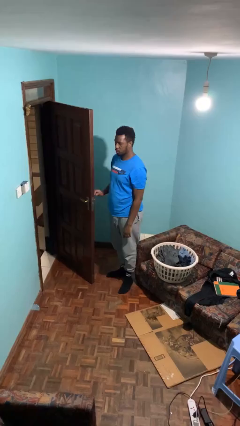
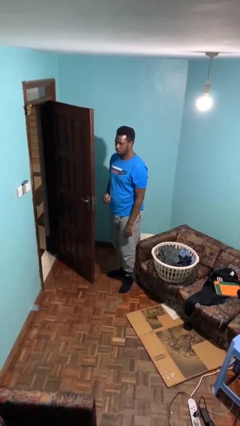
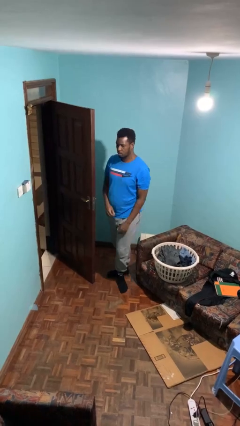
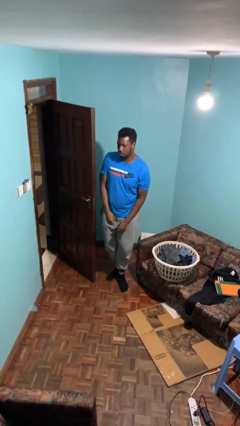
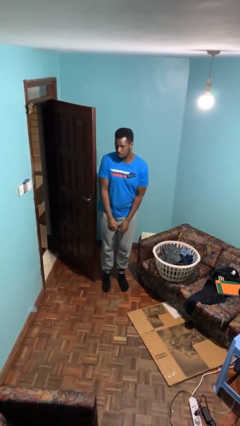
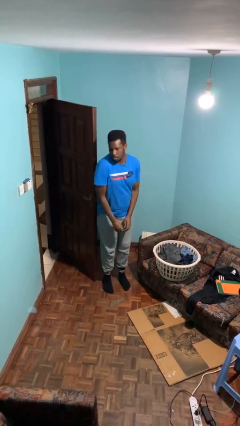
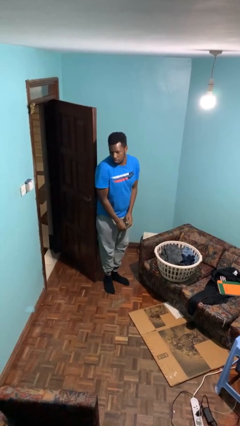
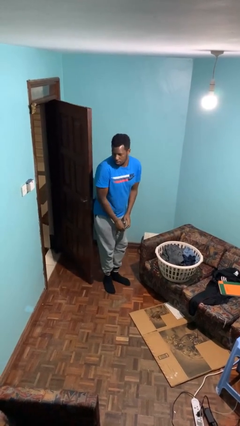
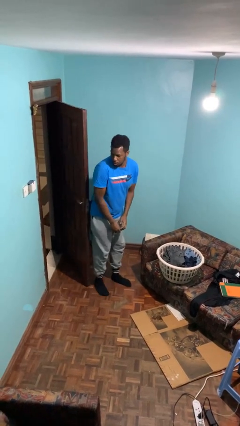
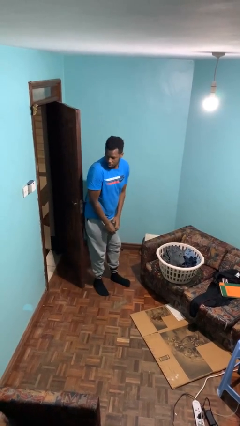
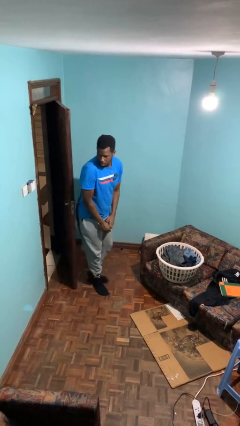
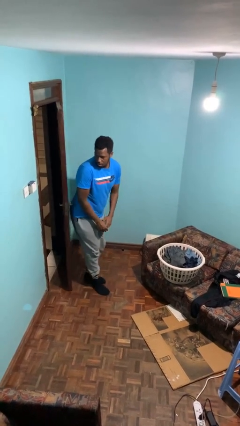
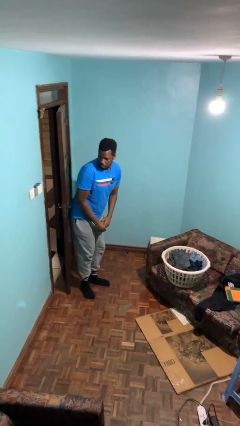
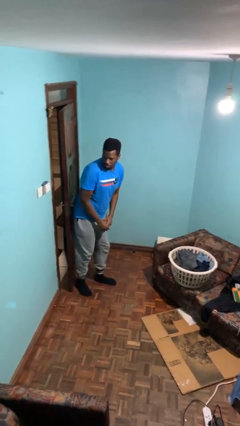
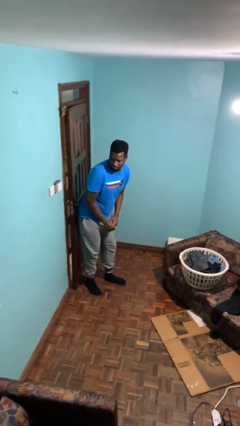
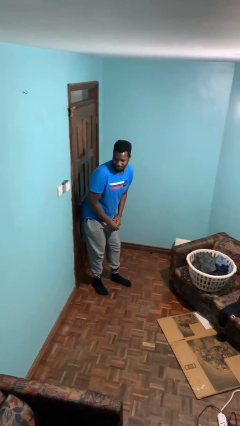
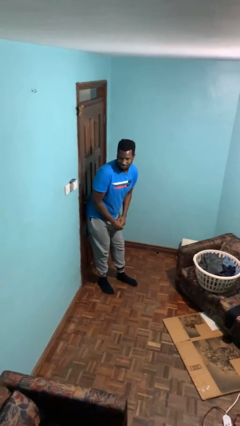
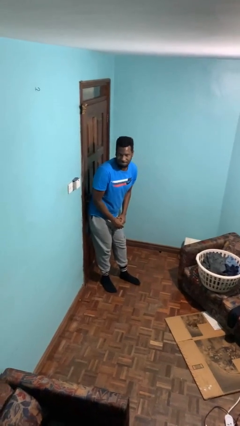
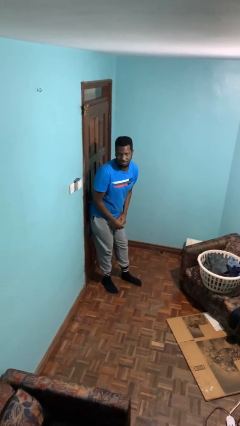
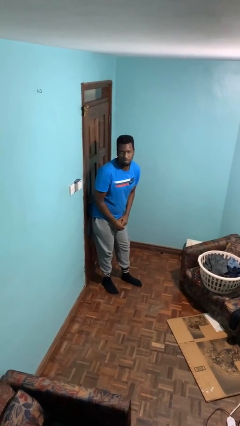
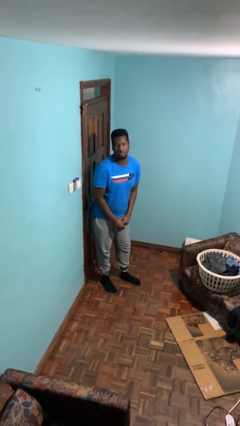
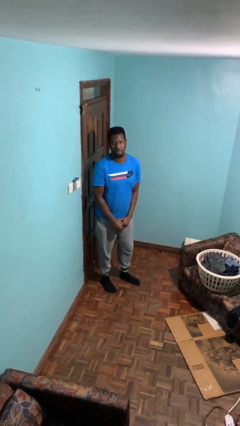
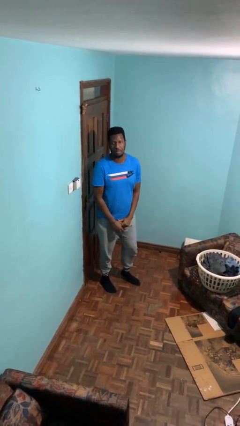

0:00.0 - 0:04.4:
person closes door with hip

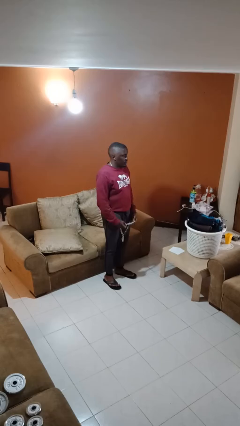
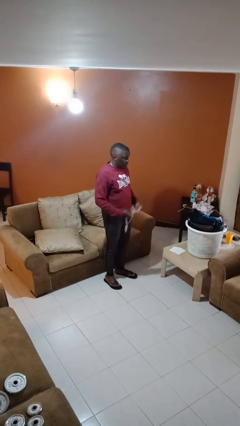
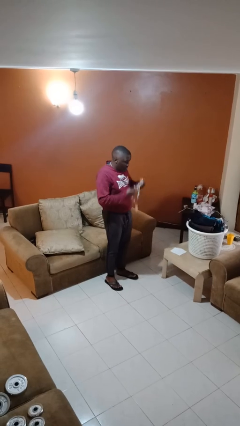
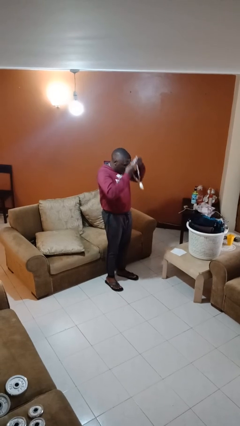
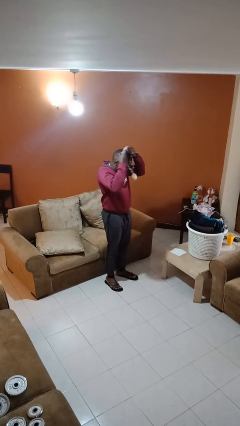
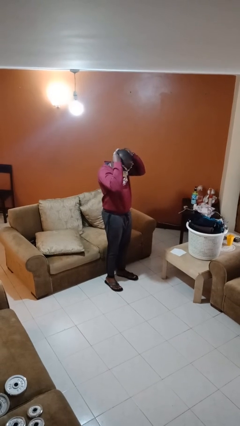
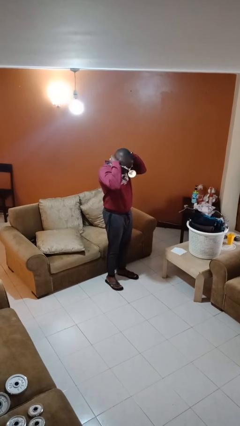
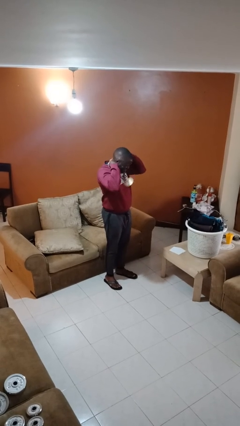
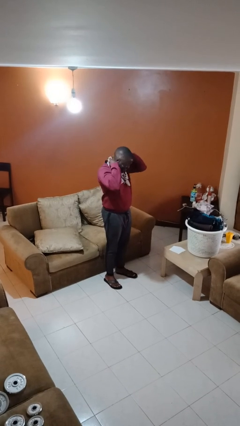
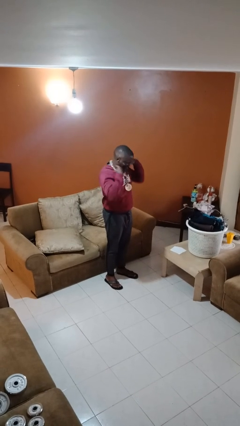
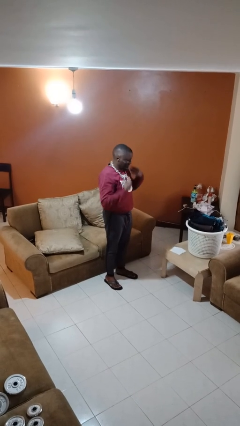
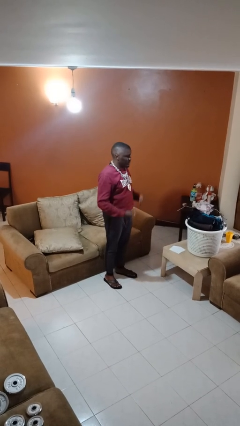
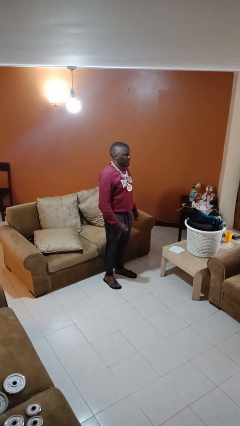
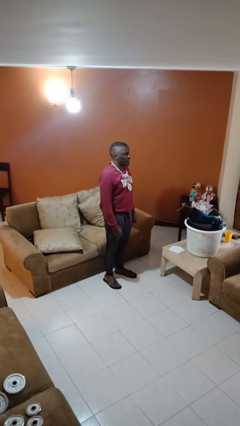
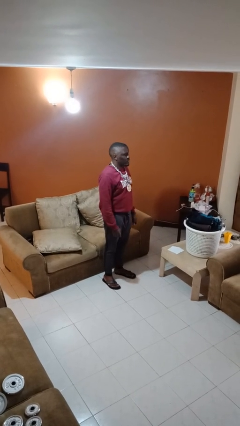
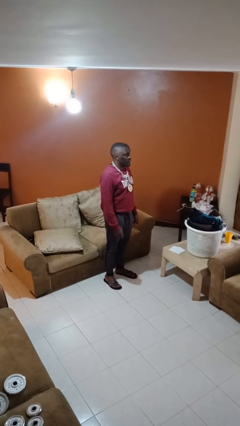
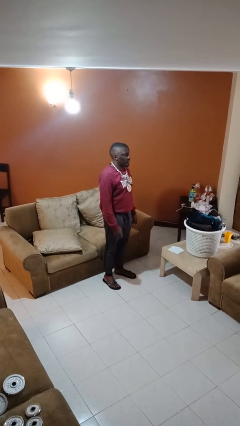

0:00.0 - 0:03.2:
person puts on necklace

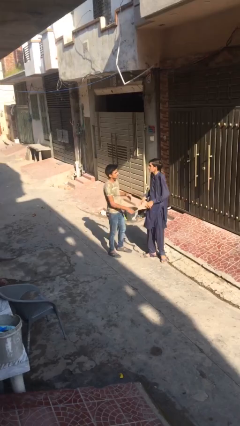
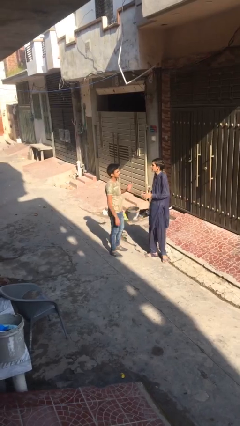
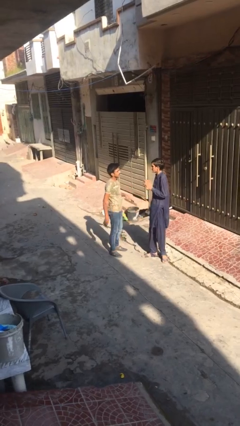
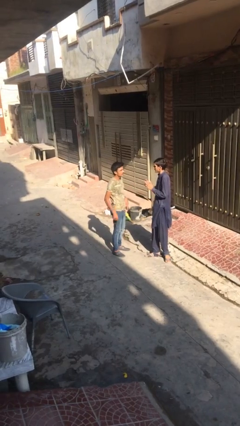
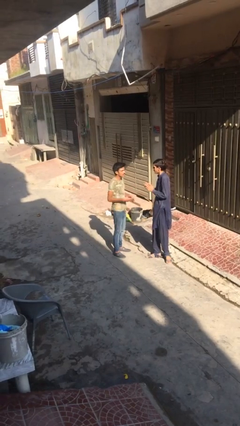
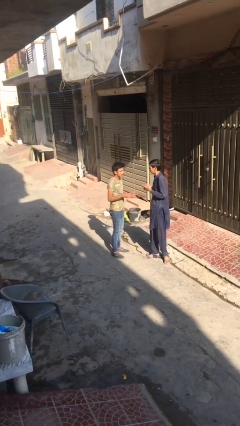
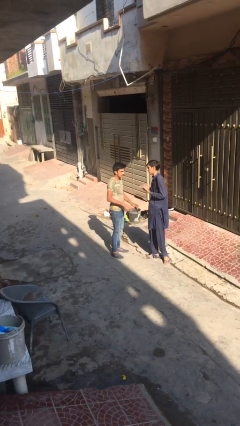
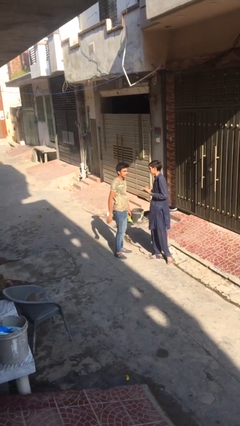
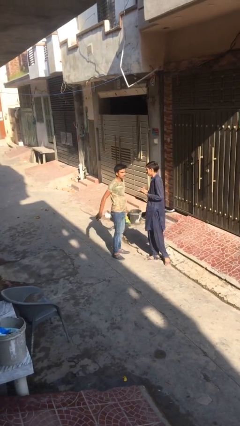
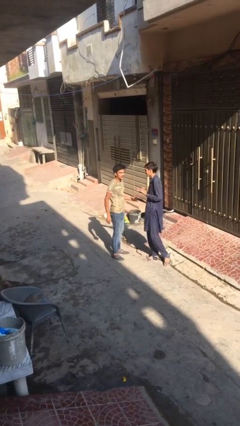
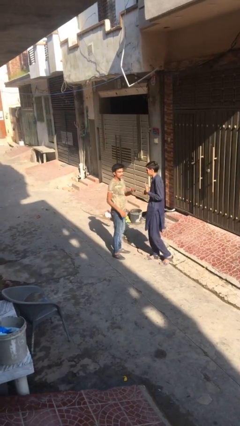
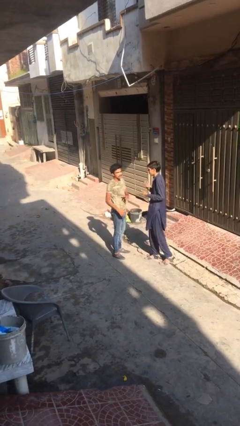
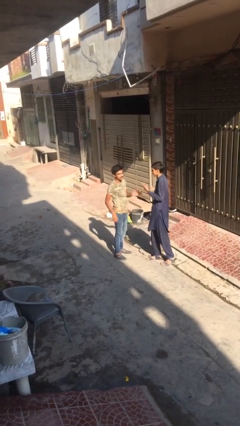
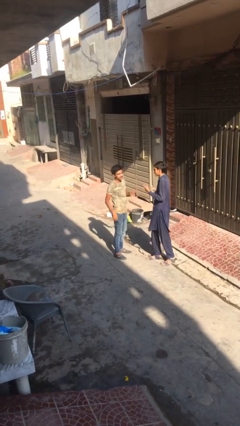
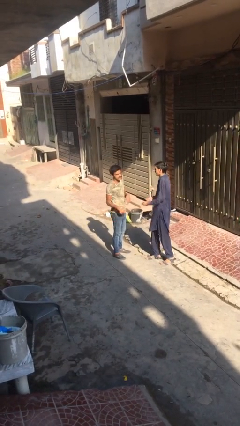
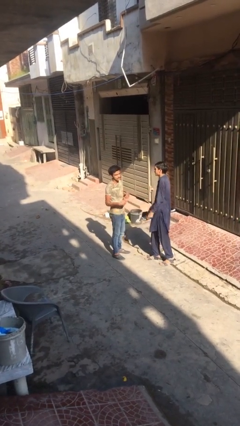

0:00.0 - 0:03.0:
person talks to person

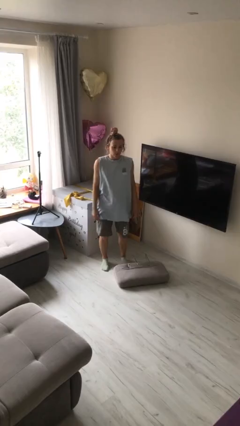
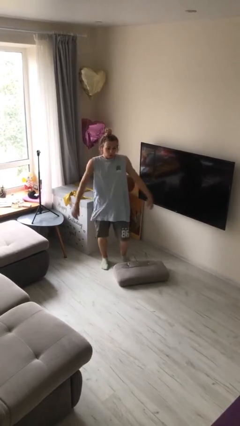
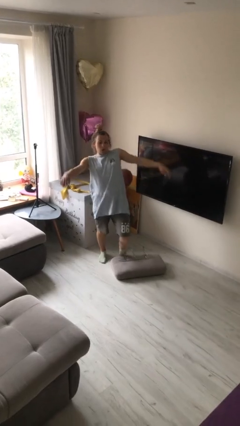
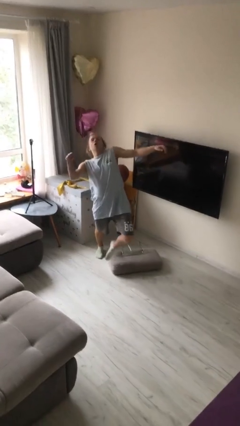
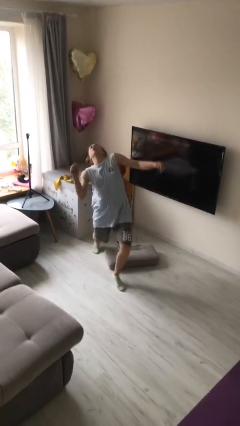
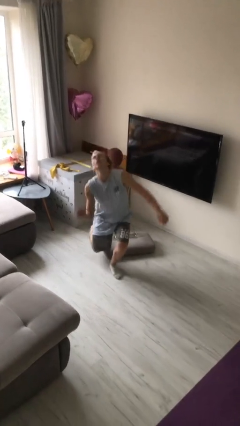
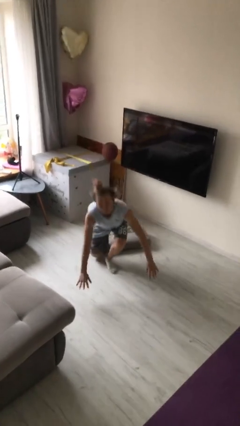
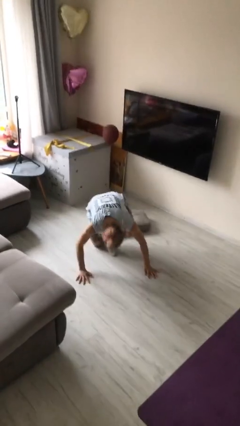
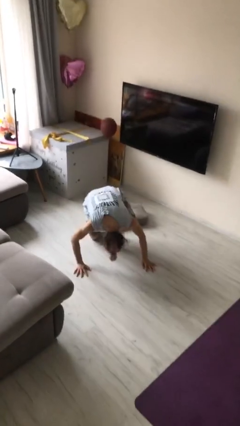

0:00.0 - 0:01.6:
person trips on object on floor

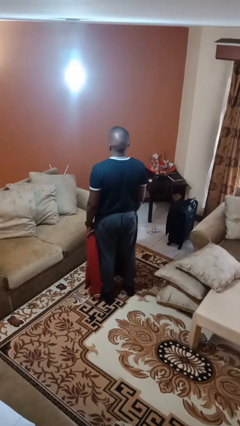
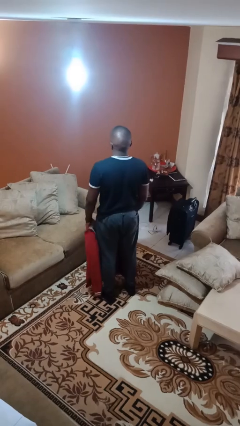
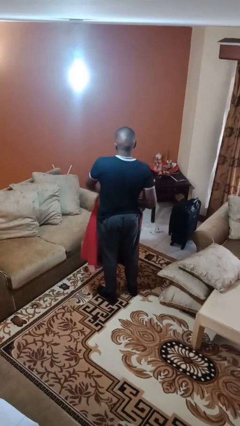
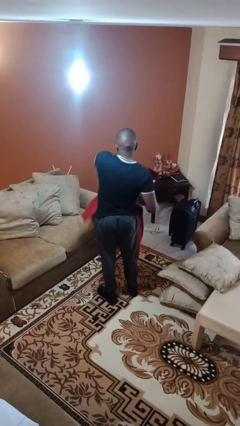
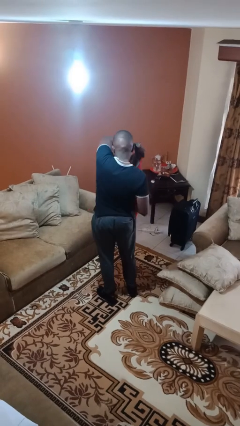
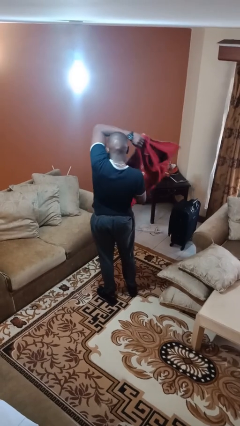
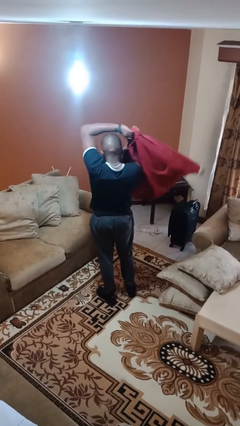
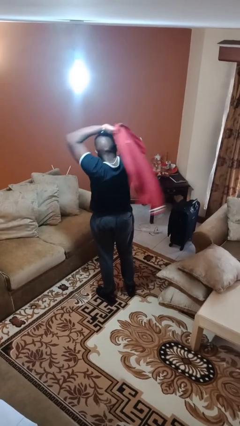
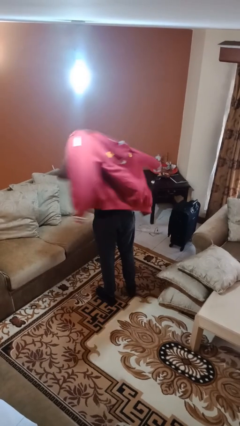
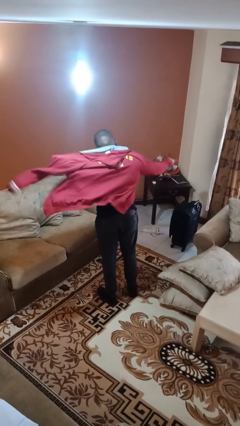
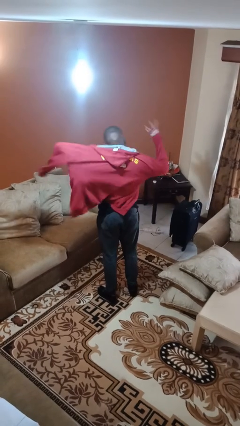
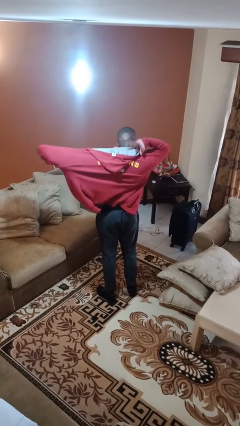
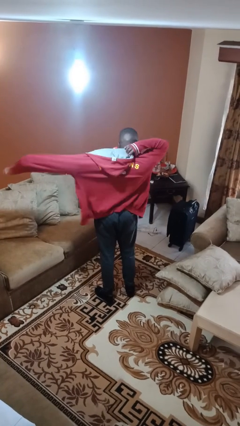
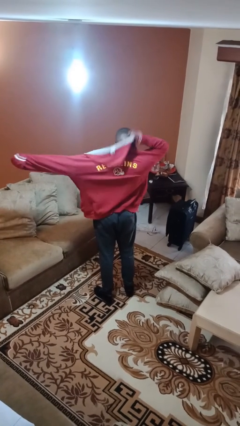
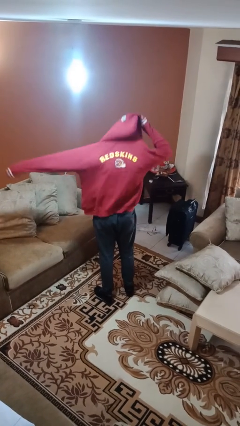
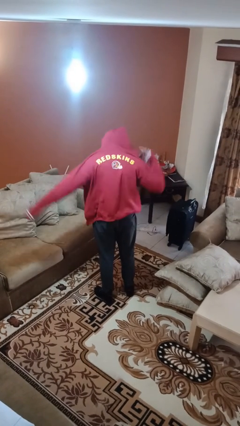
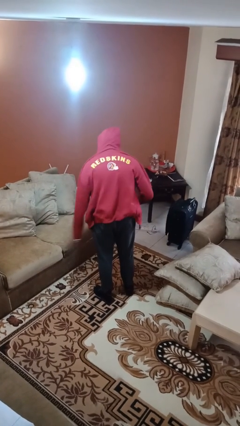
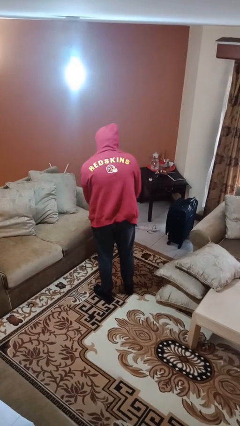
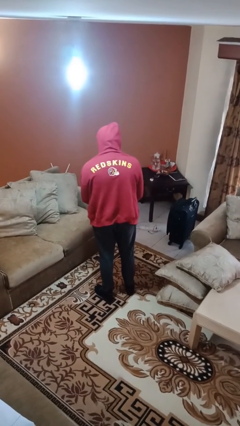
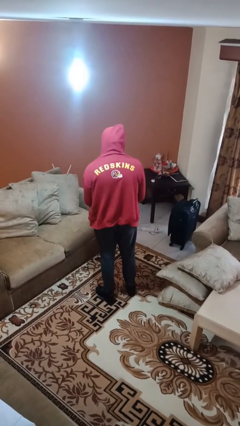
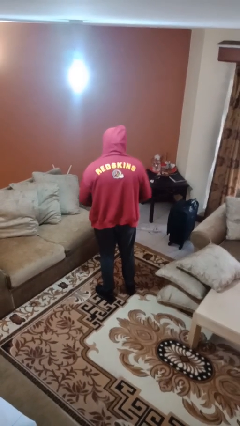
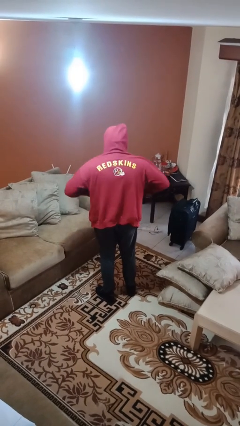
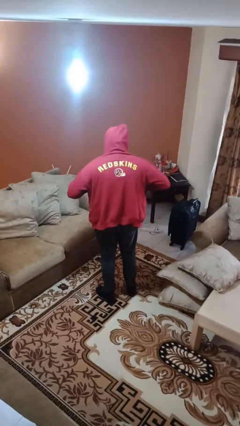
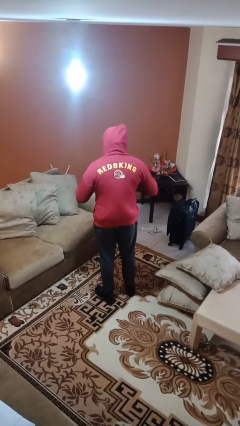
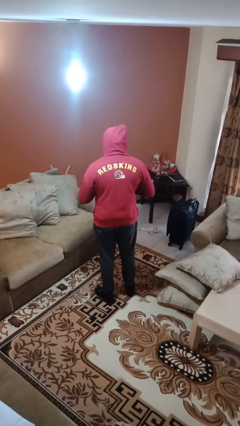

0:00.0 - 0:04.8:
person puts on hoodie

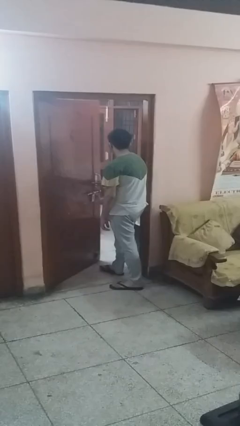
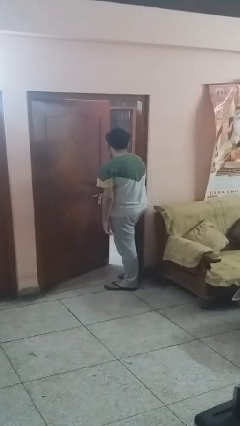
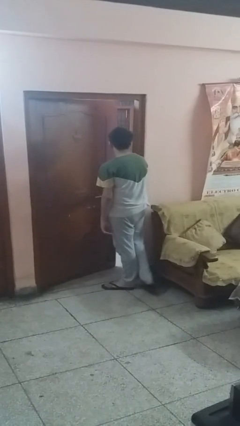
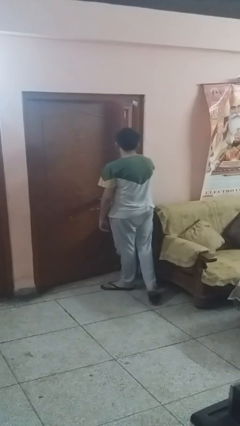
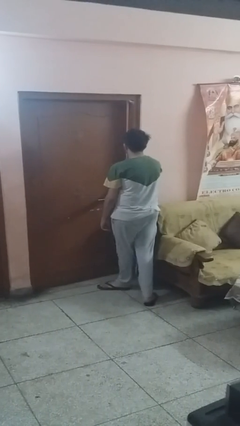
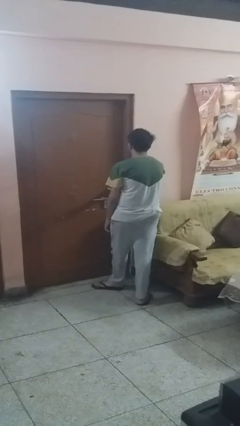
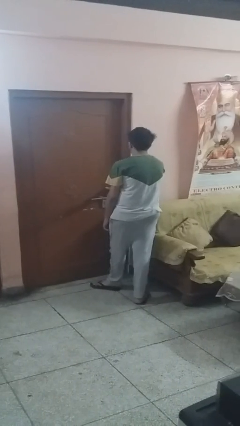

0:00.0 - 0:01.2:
person closes facility door
